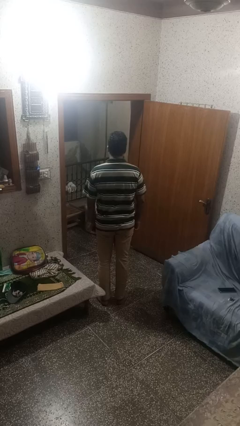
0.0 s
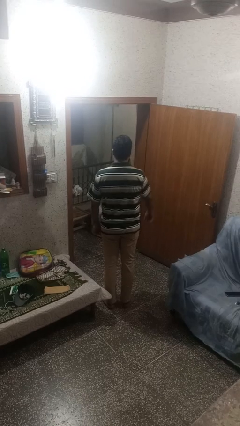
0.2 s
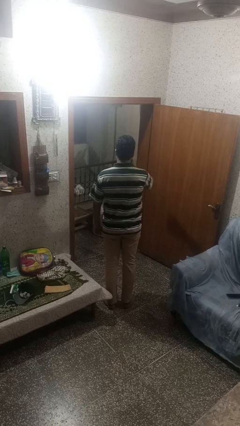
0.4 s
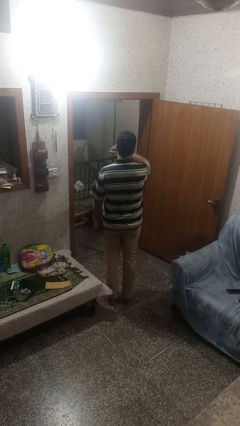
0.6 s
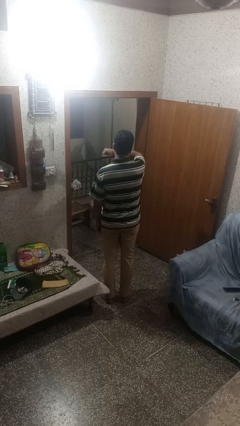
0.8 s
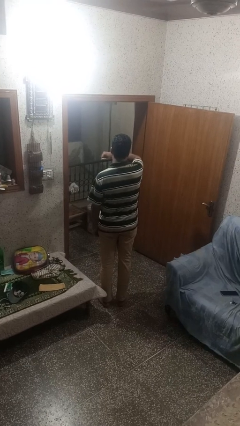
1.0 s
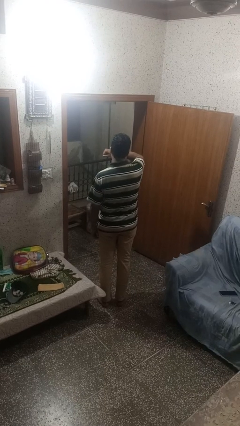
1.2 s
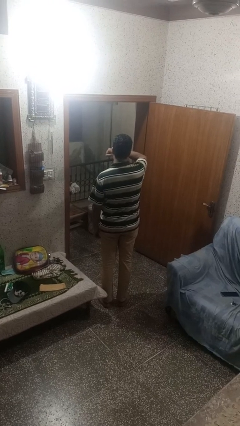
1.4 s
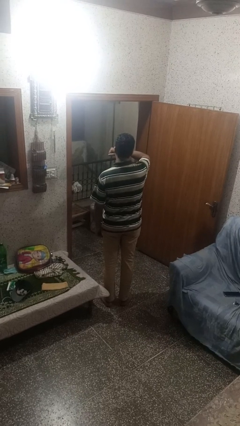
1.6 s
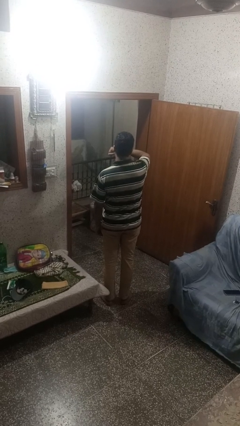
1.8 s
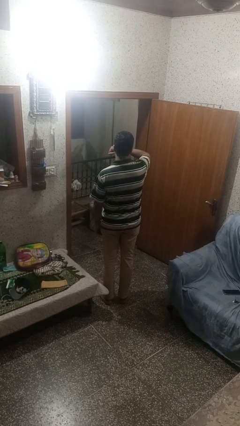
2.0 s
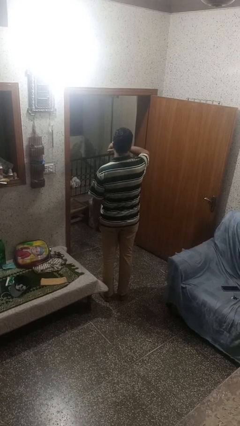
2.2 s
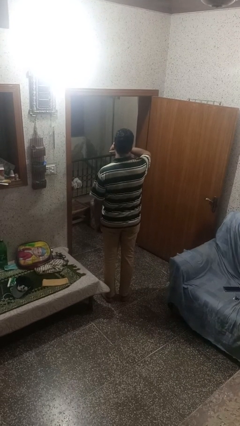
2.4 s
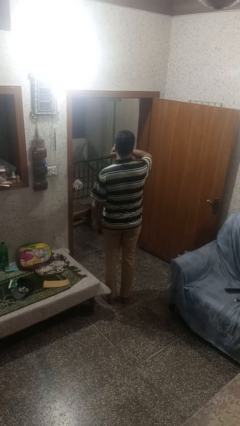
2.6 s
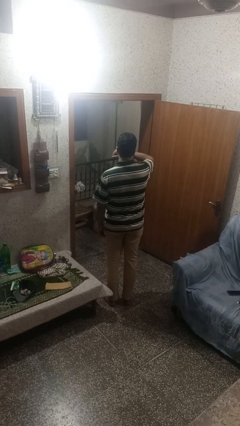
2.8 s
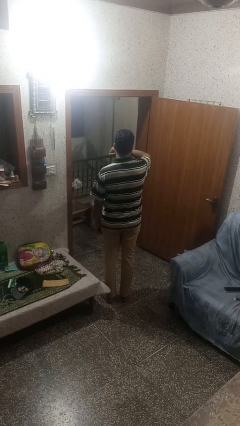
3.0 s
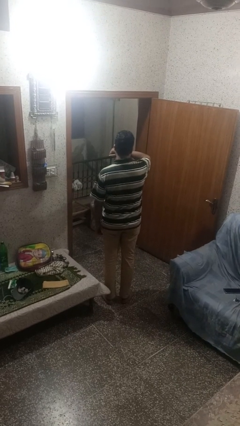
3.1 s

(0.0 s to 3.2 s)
person karate chop

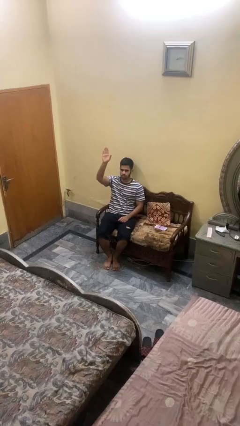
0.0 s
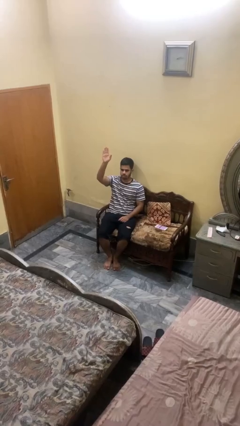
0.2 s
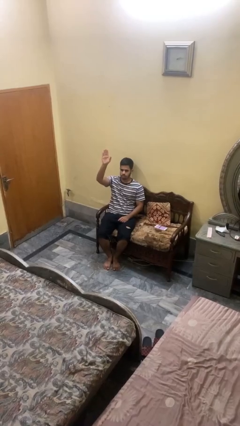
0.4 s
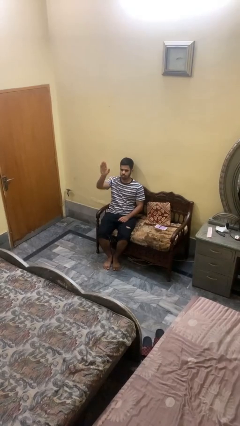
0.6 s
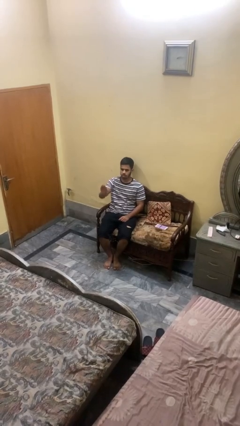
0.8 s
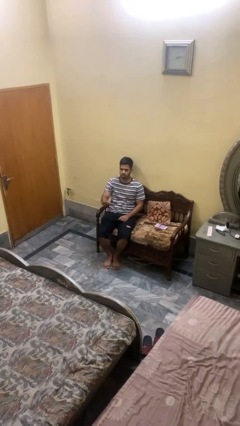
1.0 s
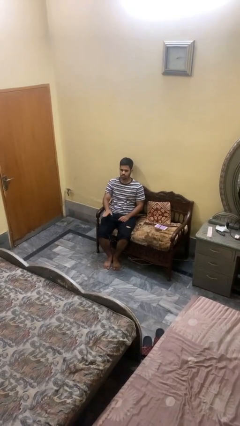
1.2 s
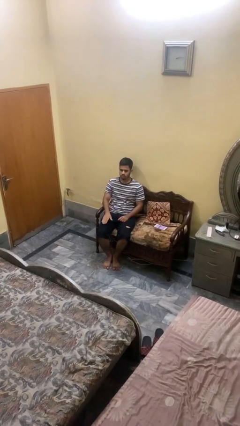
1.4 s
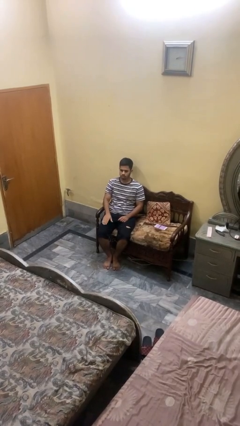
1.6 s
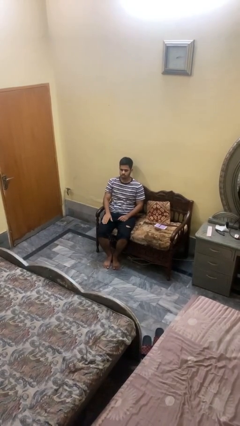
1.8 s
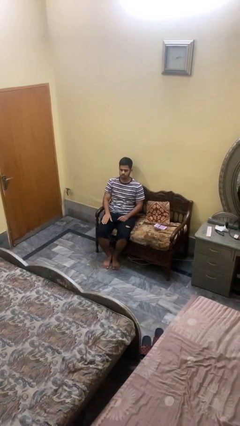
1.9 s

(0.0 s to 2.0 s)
person gestures lower hand

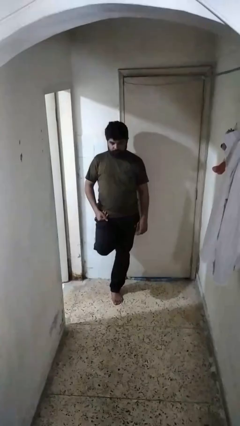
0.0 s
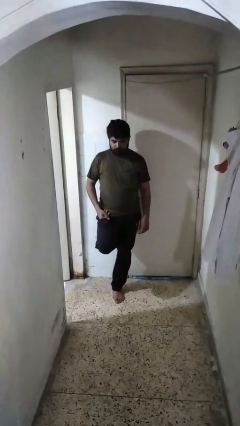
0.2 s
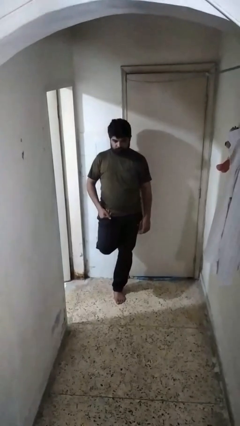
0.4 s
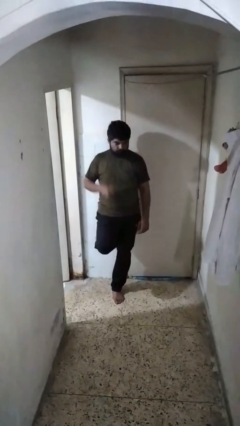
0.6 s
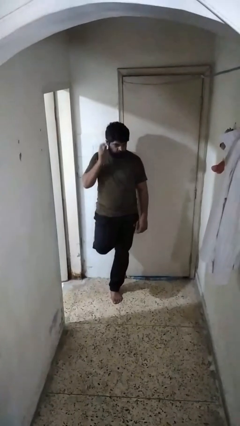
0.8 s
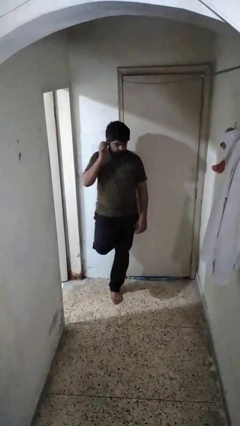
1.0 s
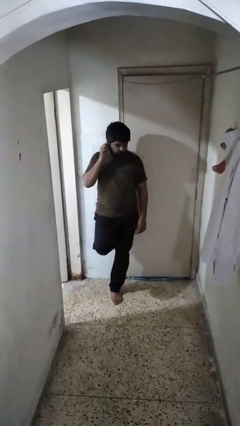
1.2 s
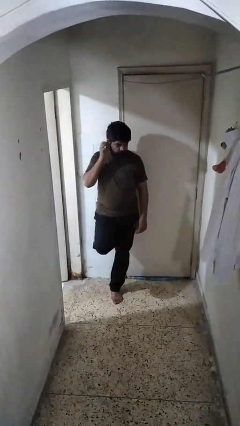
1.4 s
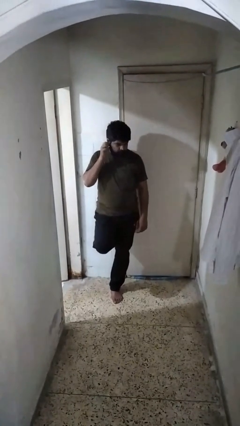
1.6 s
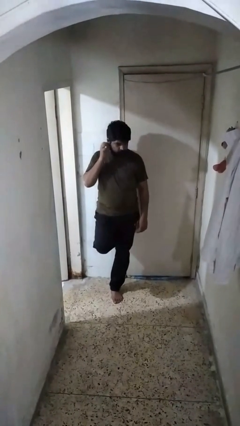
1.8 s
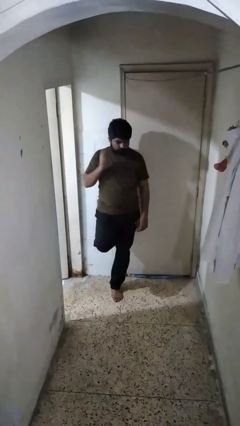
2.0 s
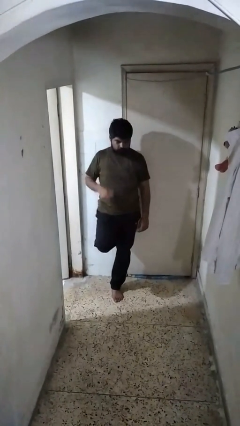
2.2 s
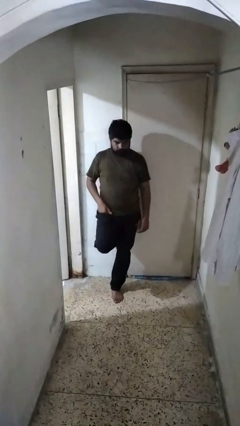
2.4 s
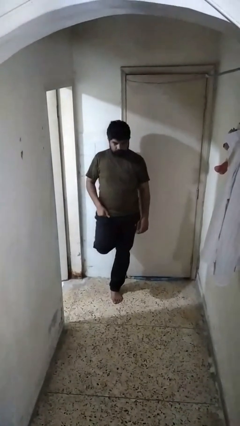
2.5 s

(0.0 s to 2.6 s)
person touches earlobe

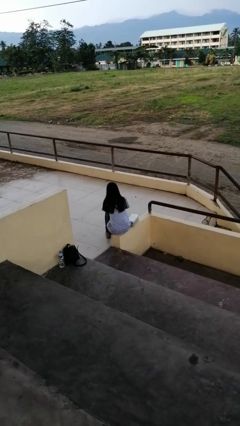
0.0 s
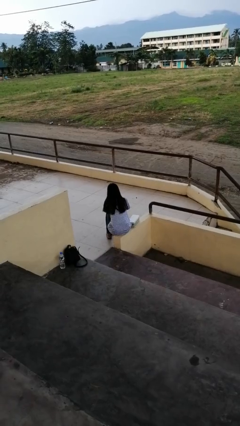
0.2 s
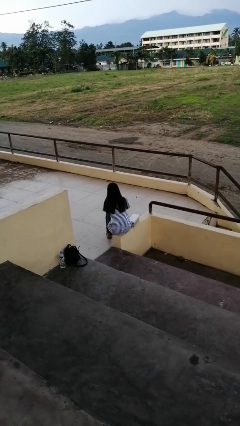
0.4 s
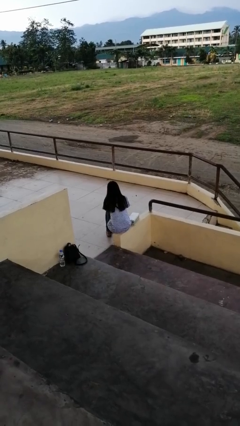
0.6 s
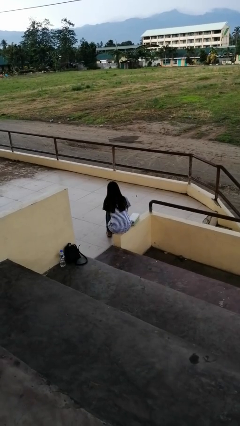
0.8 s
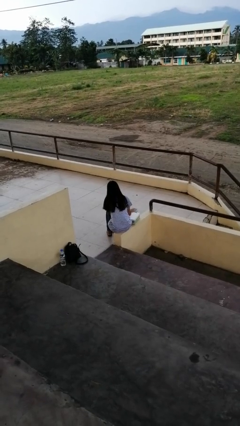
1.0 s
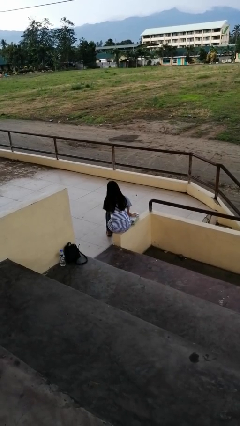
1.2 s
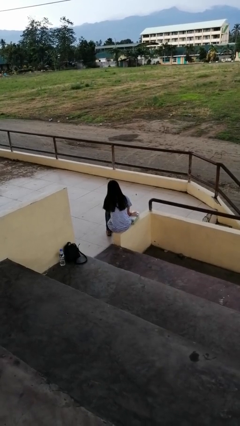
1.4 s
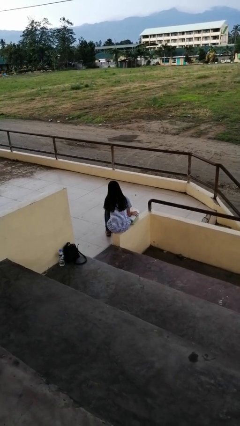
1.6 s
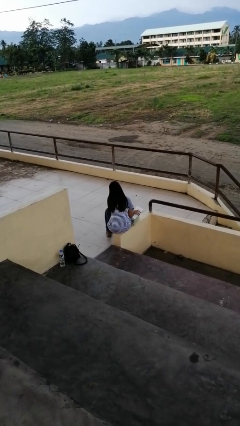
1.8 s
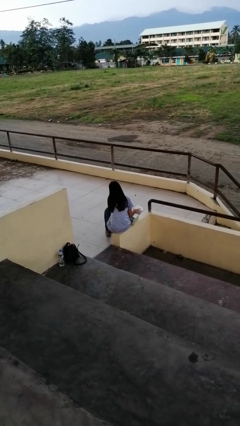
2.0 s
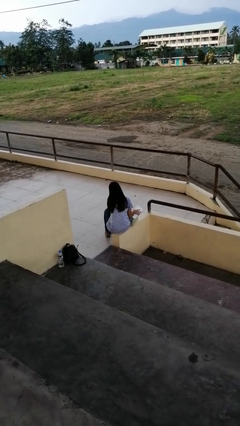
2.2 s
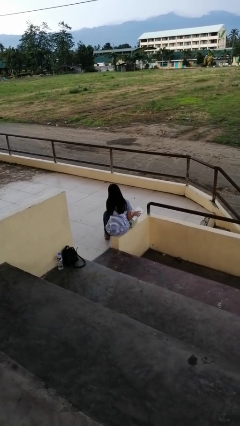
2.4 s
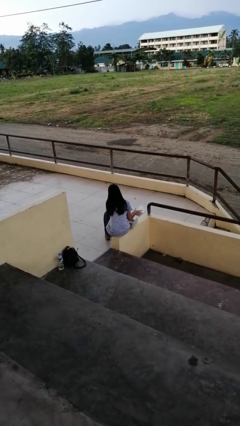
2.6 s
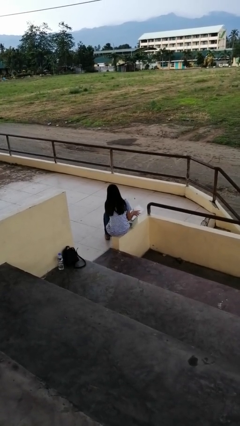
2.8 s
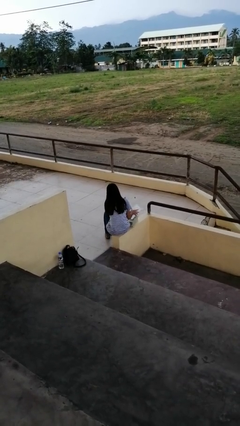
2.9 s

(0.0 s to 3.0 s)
person takes object from box

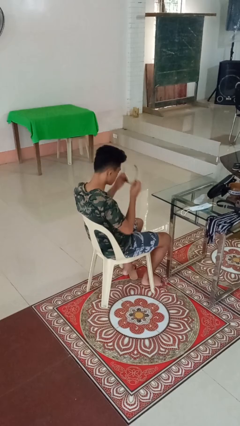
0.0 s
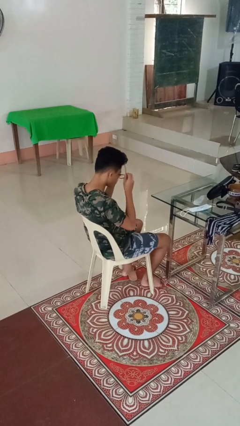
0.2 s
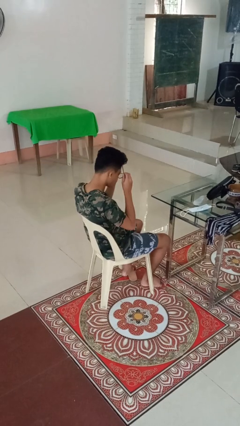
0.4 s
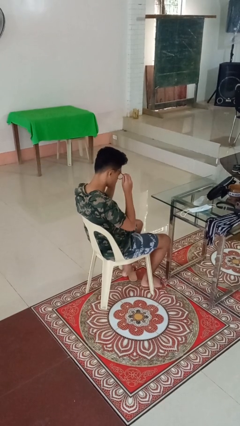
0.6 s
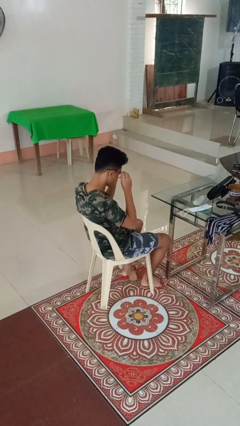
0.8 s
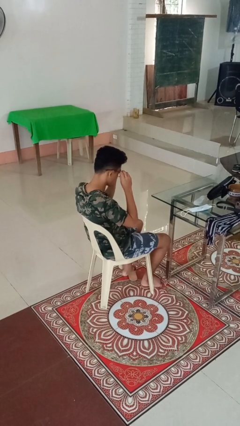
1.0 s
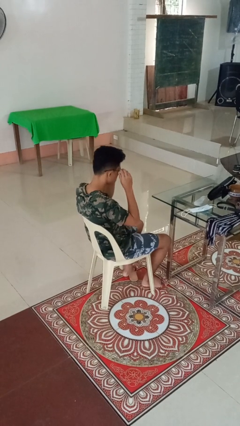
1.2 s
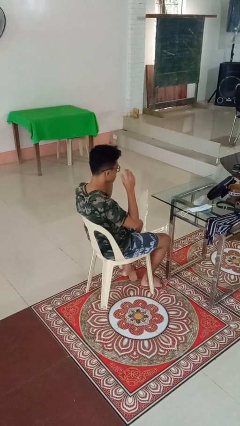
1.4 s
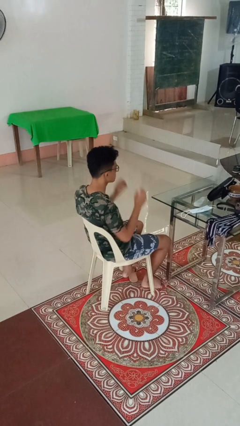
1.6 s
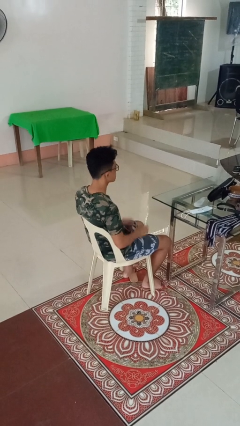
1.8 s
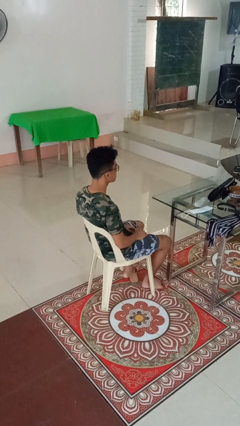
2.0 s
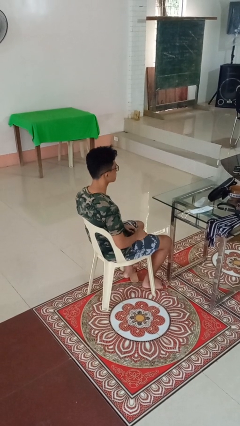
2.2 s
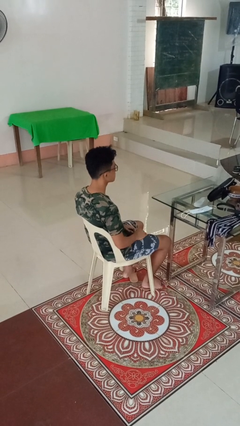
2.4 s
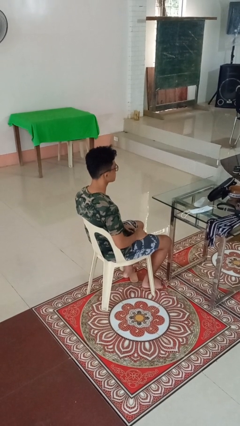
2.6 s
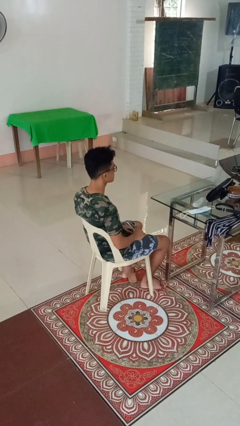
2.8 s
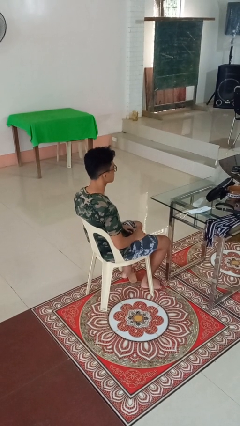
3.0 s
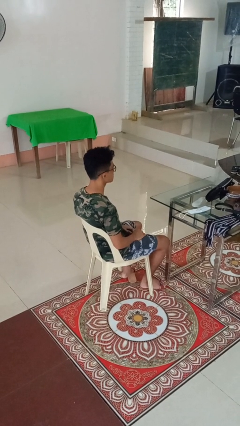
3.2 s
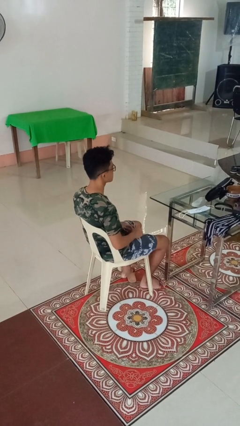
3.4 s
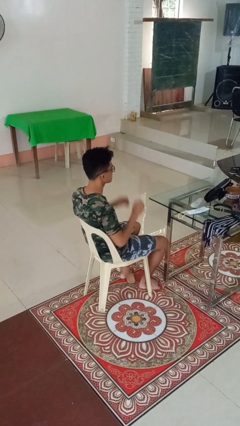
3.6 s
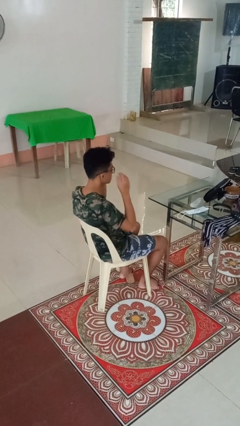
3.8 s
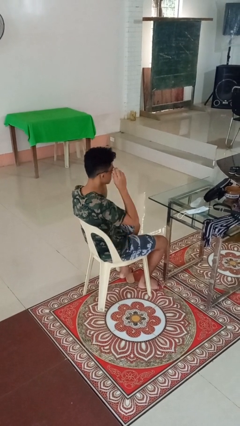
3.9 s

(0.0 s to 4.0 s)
person puts on glasses

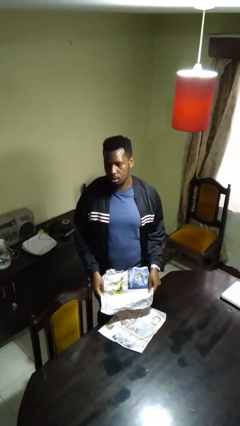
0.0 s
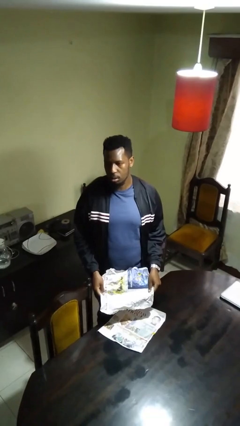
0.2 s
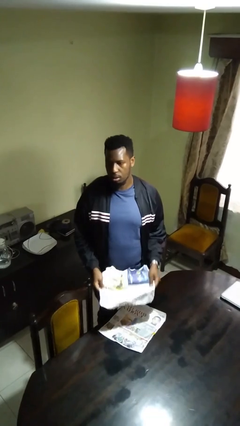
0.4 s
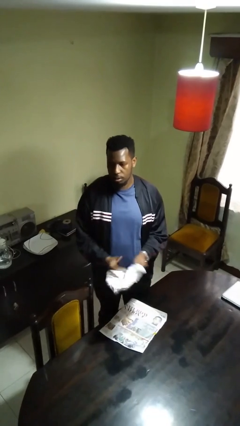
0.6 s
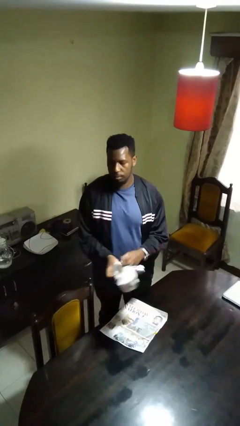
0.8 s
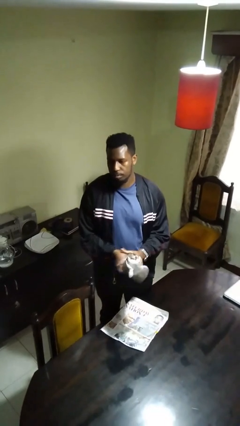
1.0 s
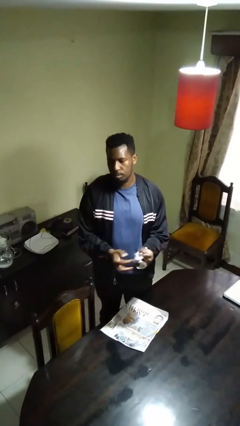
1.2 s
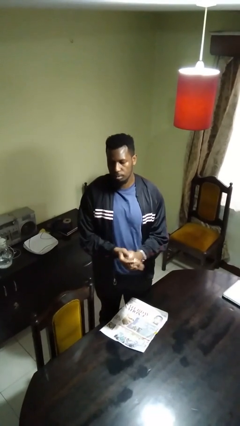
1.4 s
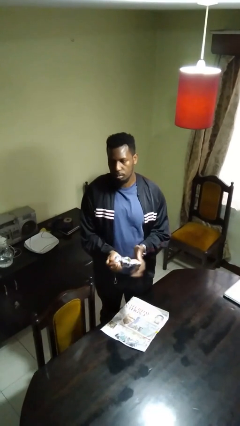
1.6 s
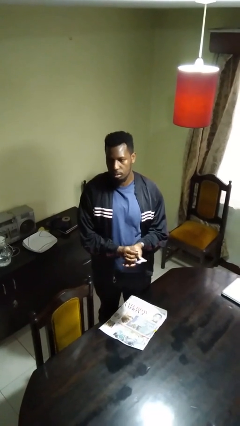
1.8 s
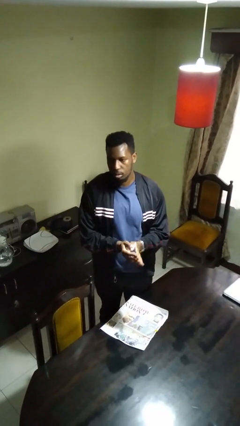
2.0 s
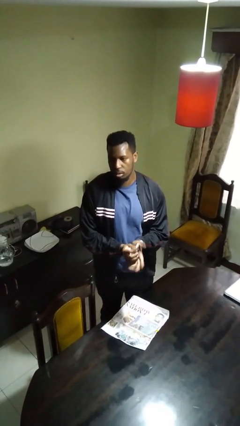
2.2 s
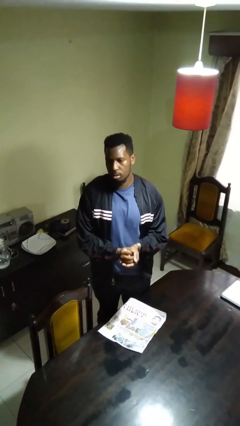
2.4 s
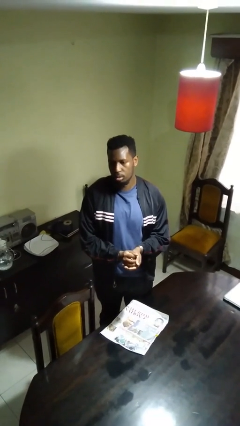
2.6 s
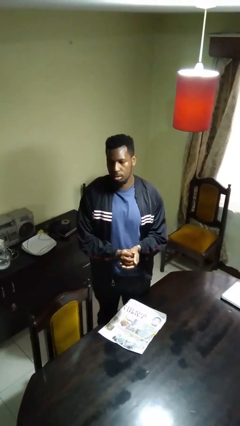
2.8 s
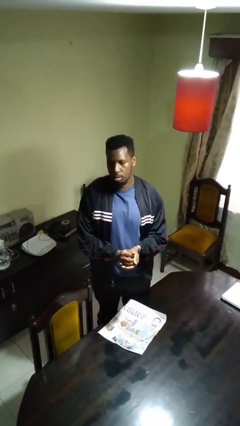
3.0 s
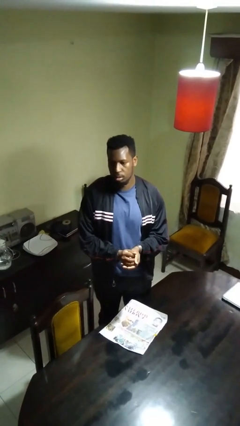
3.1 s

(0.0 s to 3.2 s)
person crumples paper
